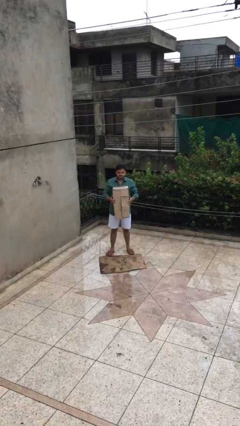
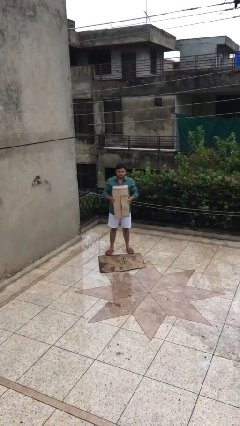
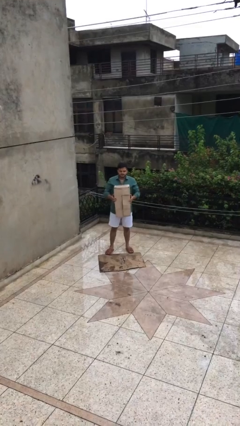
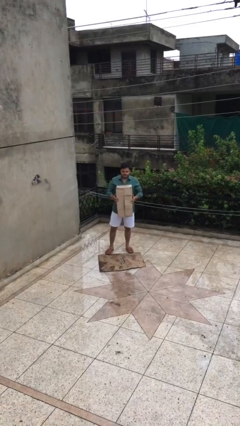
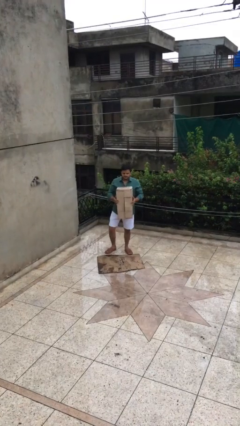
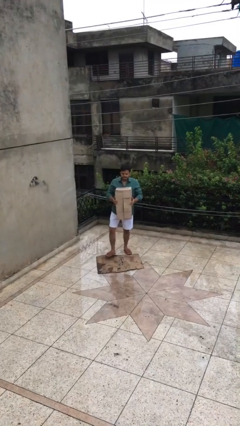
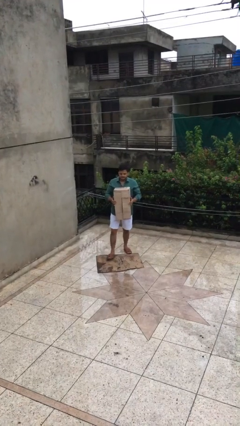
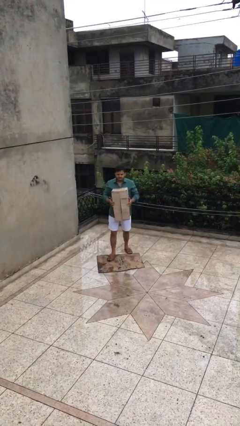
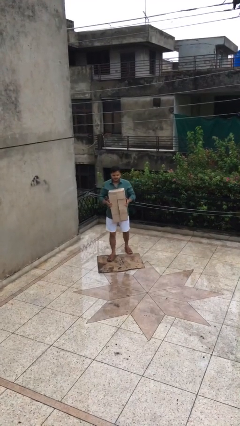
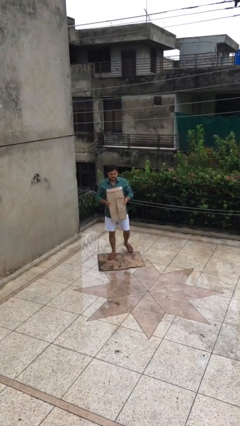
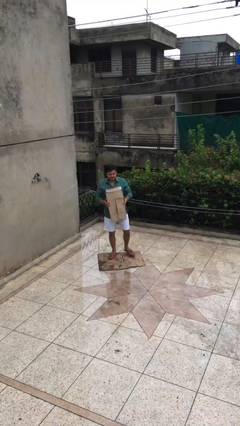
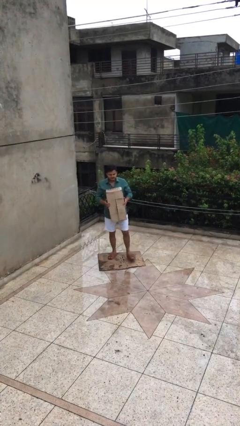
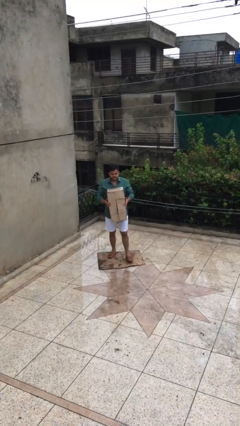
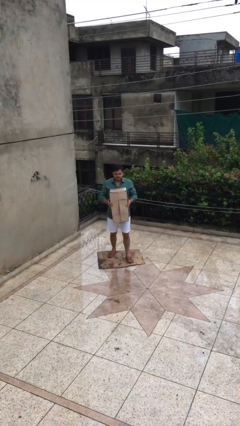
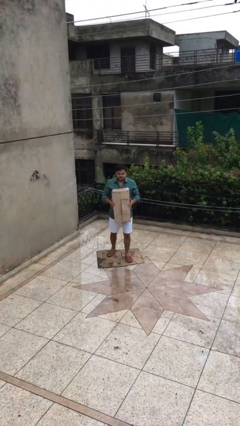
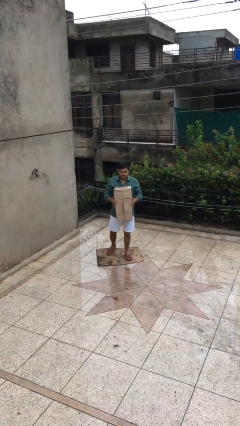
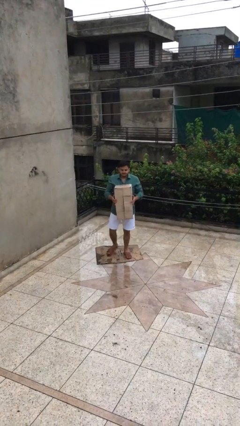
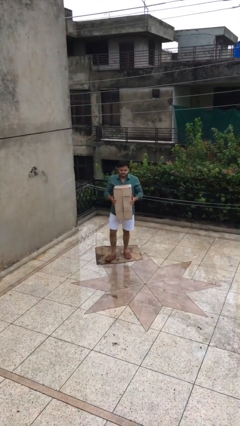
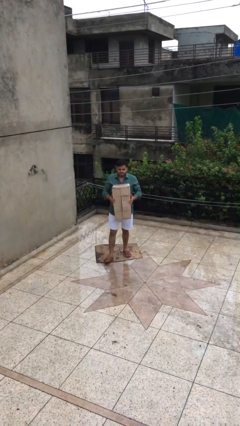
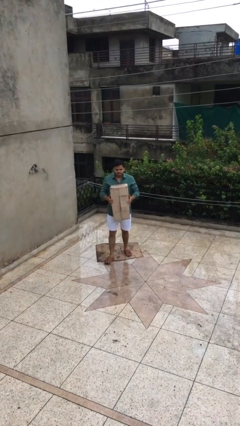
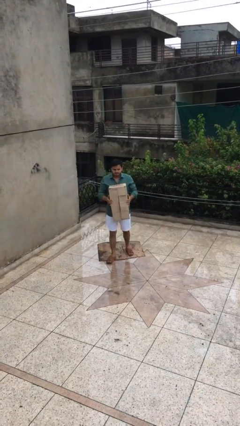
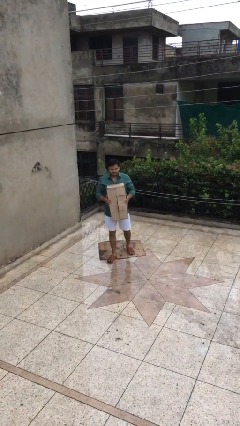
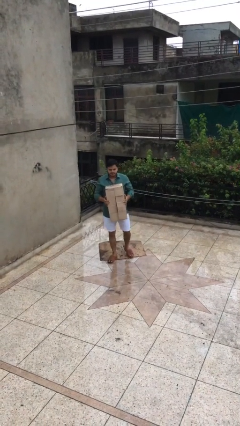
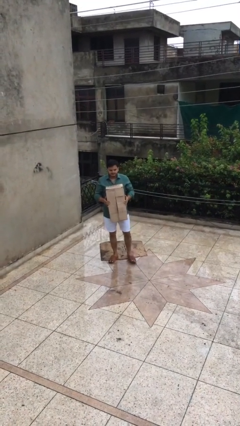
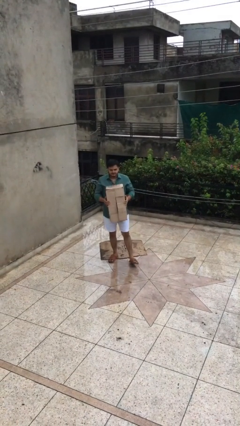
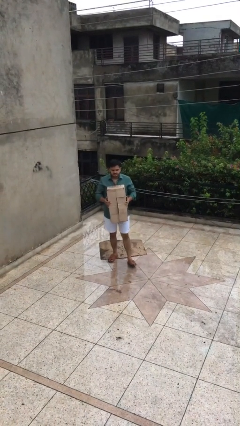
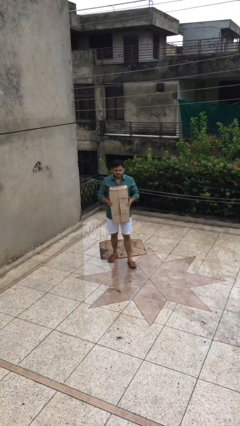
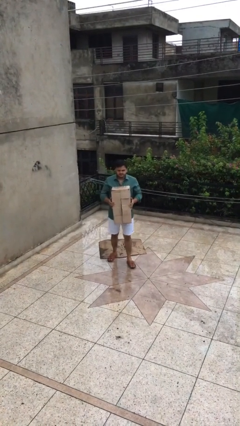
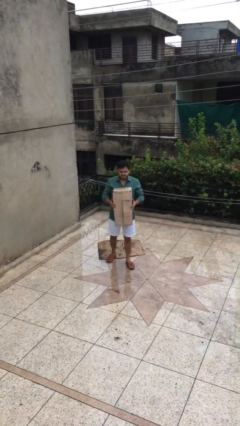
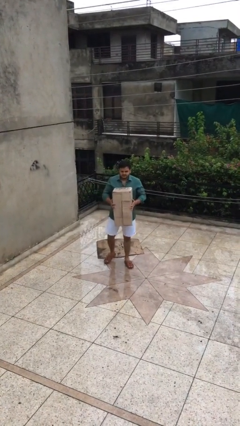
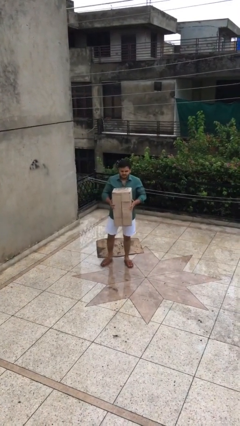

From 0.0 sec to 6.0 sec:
person carries heavy object

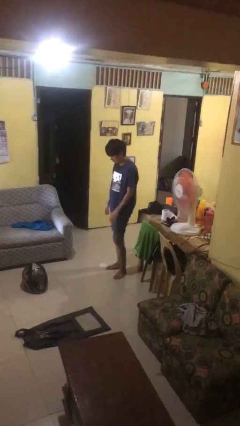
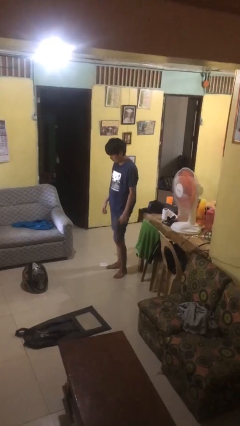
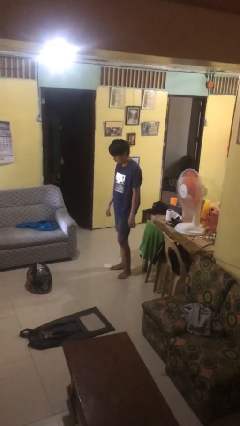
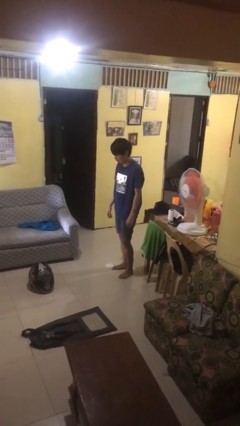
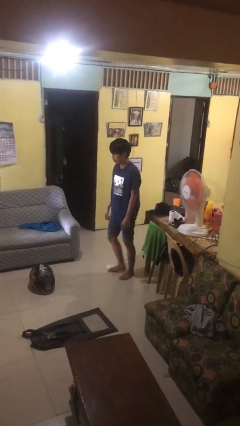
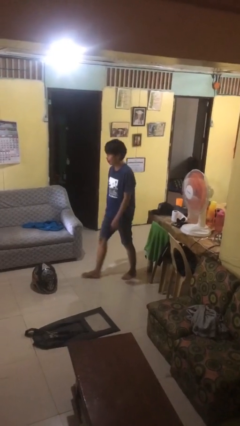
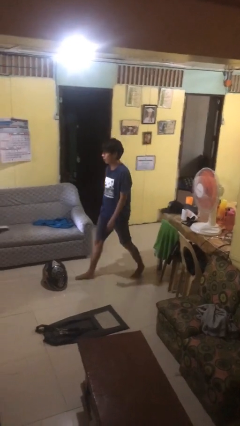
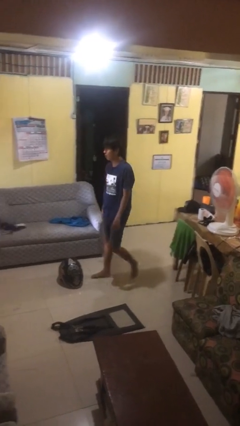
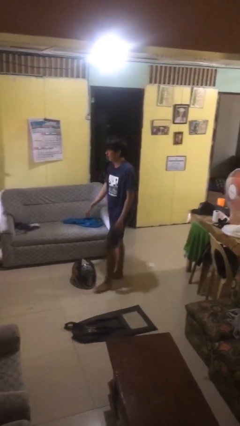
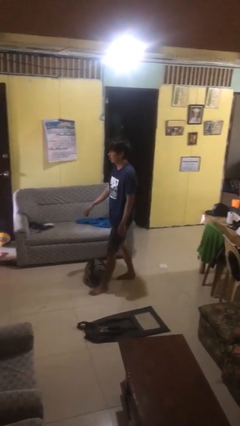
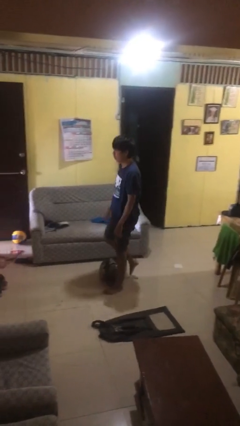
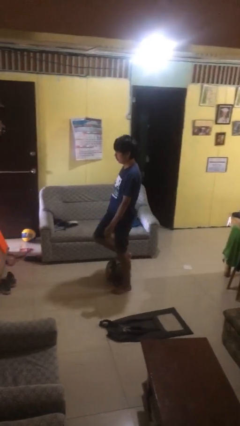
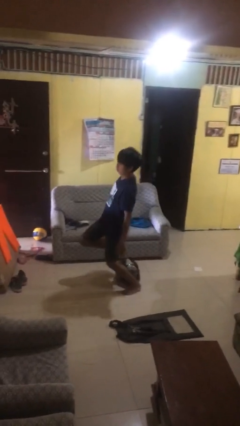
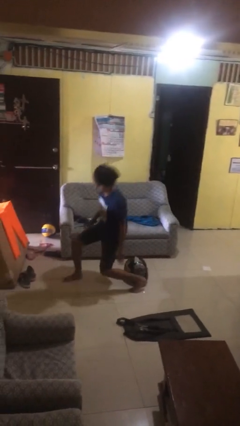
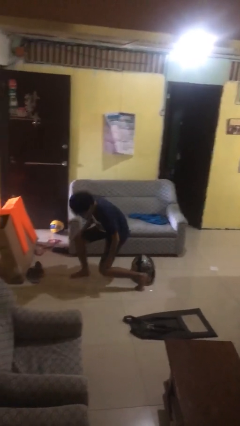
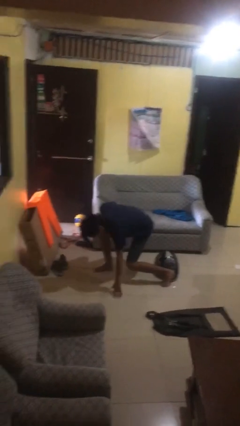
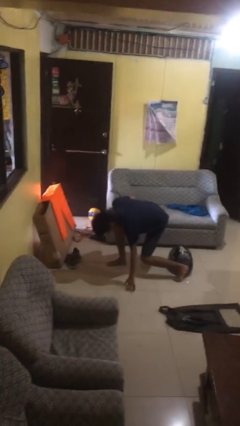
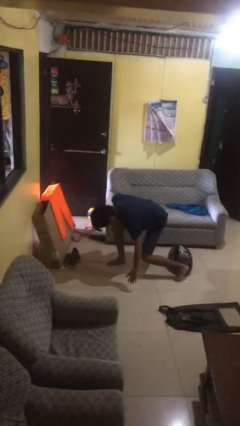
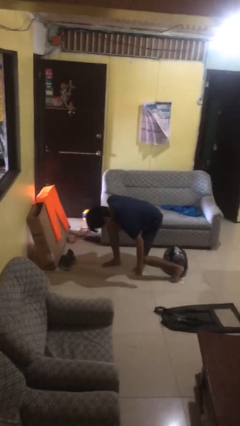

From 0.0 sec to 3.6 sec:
person trips on object on floor

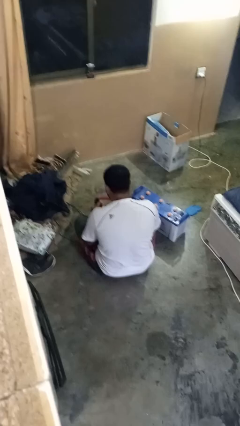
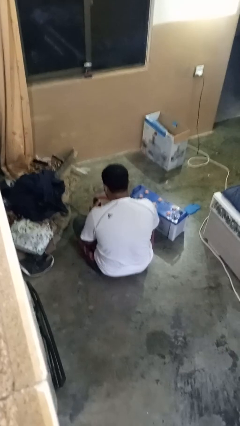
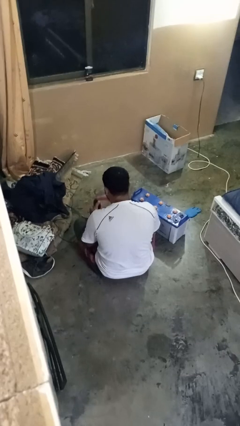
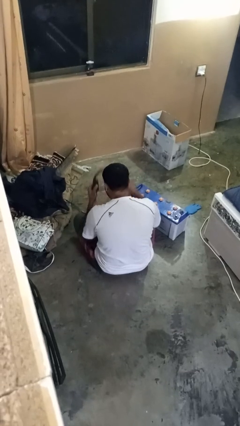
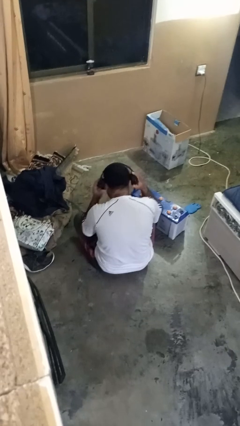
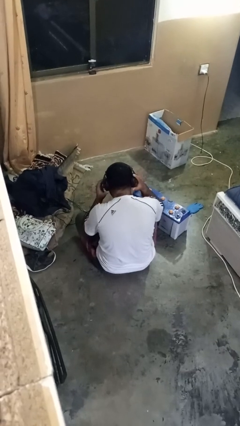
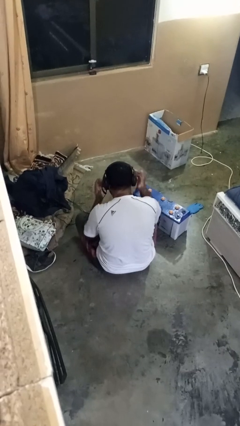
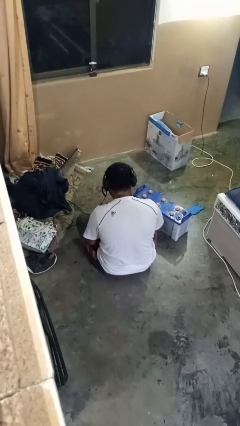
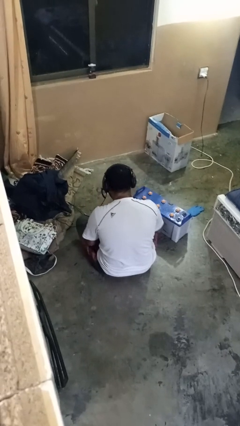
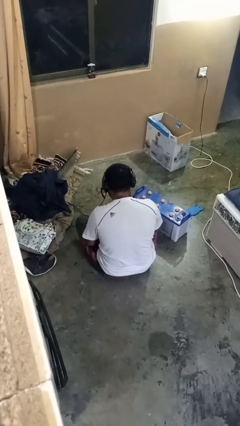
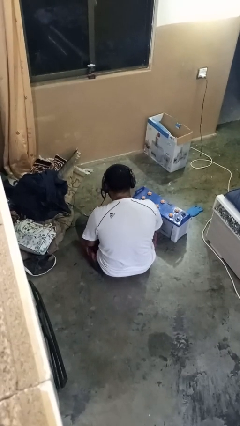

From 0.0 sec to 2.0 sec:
person takes off headphones

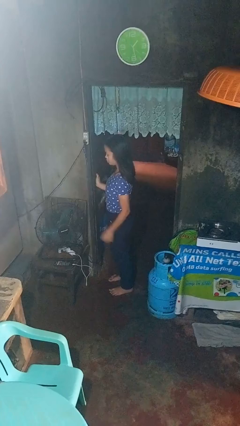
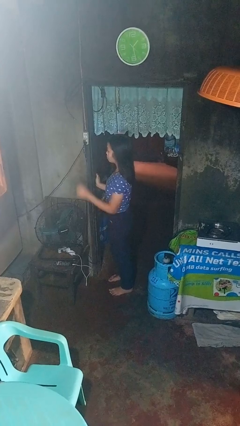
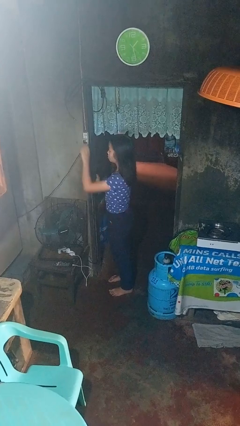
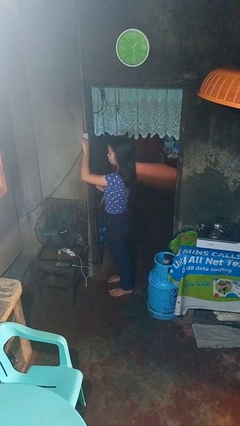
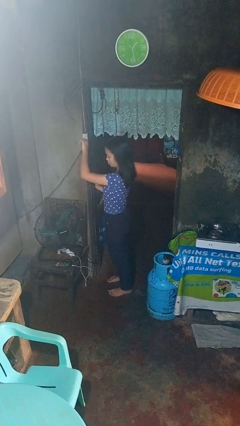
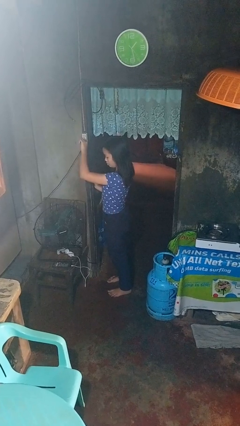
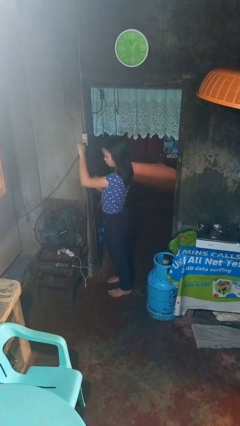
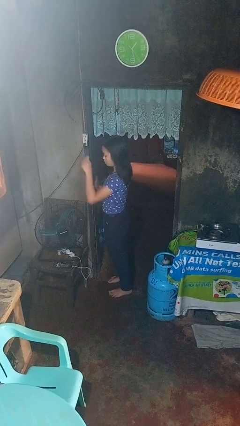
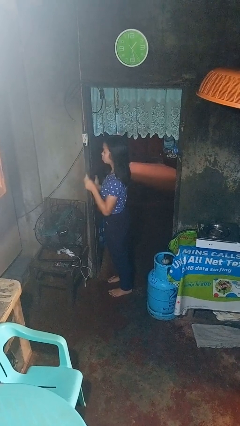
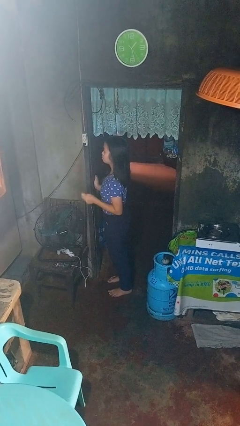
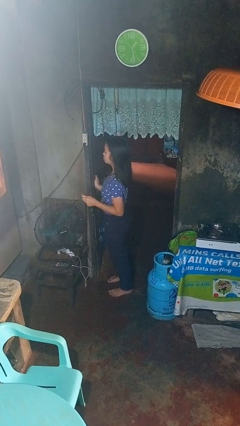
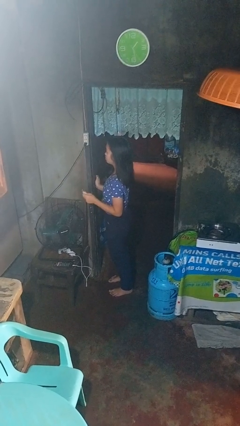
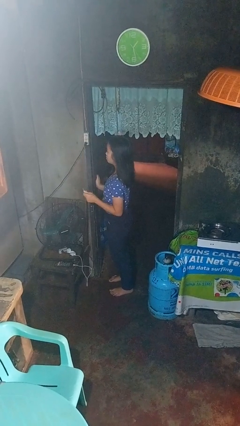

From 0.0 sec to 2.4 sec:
person unplugs from electrical socket

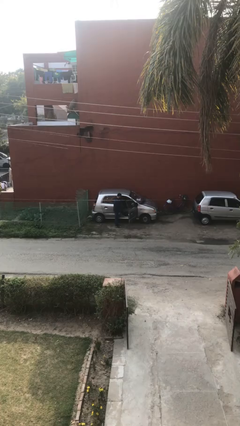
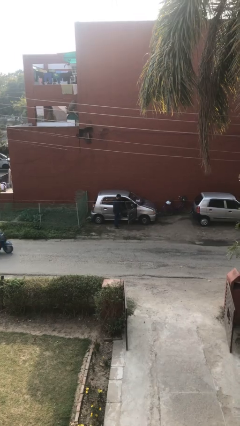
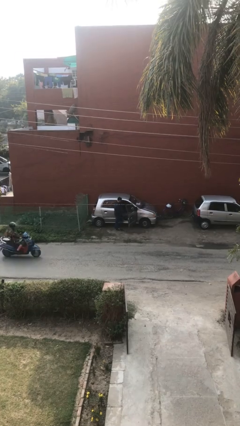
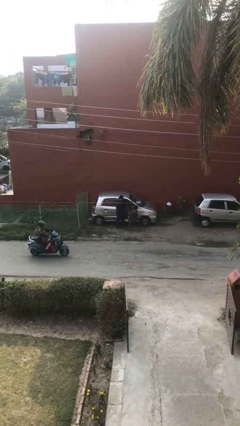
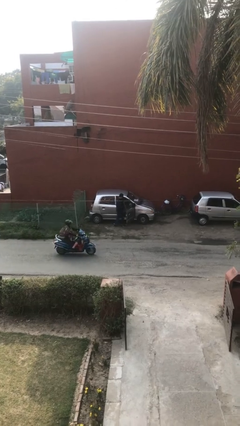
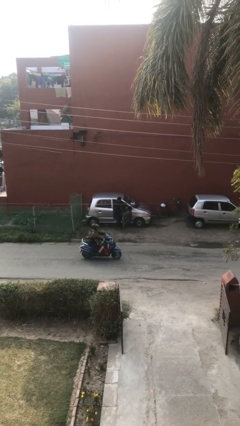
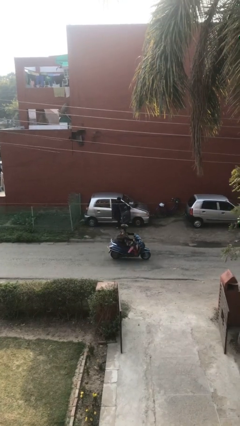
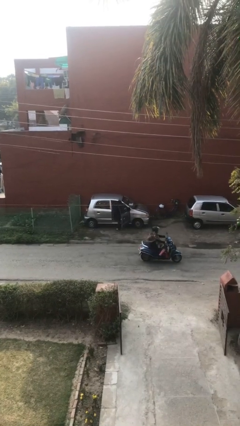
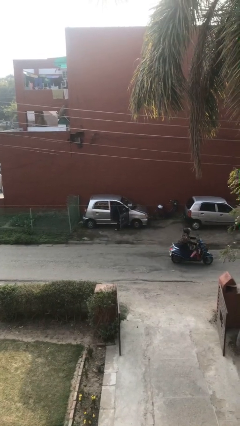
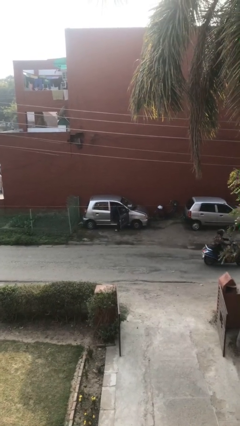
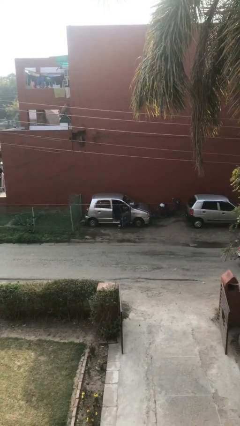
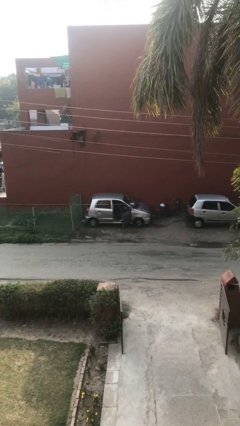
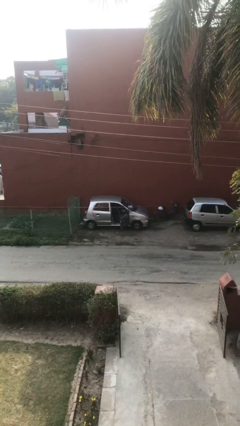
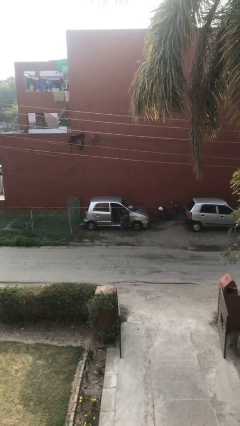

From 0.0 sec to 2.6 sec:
person enters car

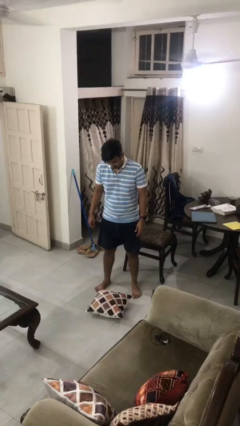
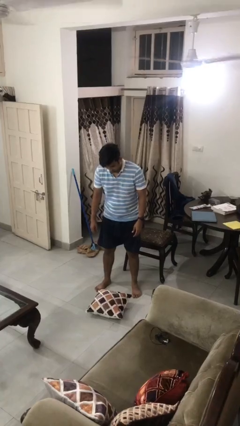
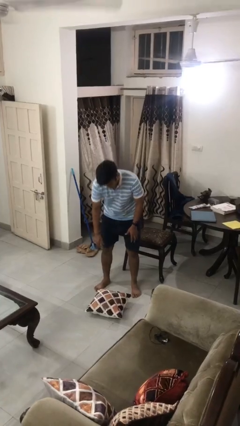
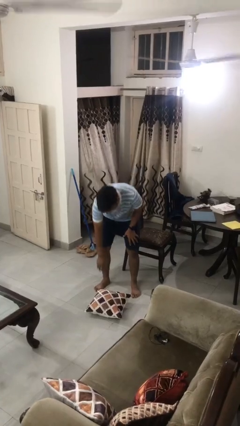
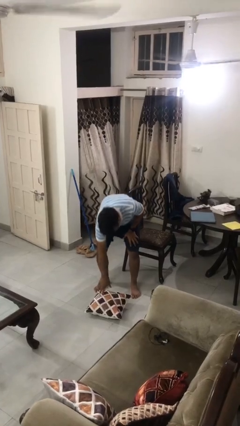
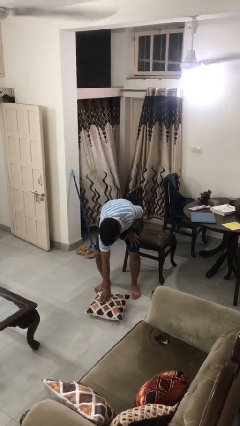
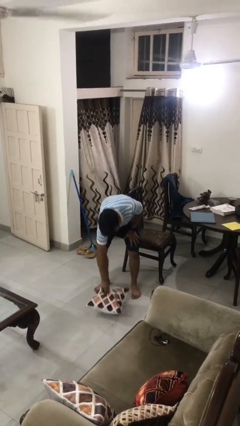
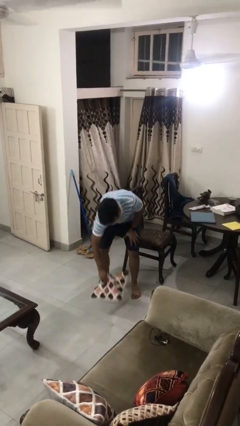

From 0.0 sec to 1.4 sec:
person picks up object from floor
